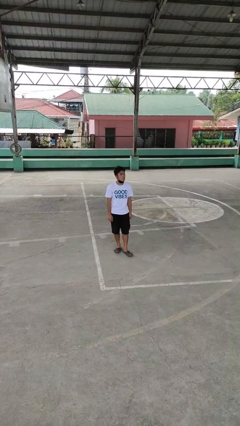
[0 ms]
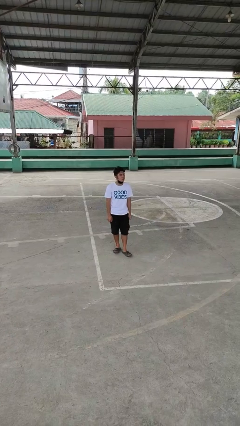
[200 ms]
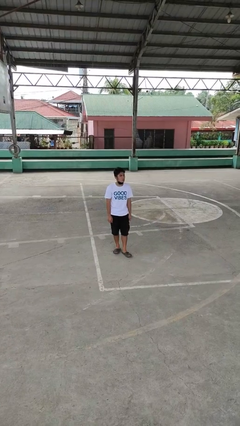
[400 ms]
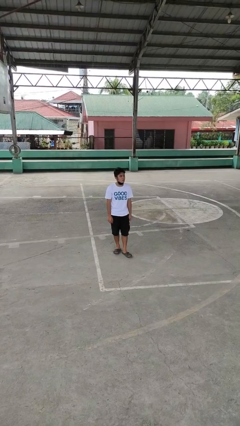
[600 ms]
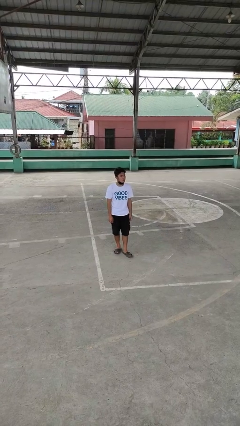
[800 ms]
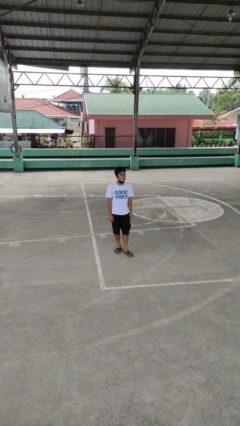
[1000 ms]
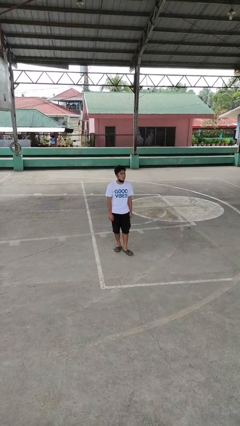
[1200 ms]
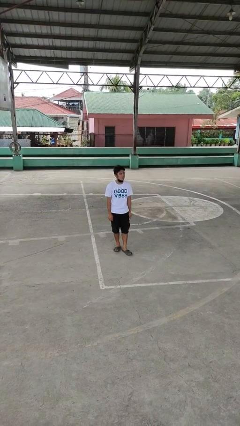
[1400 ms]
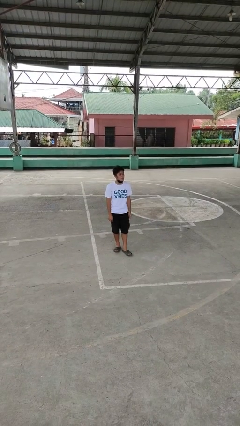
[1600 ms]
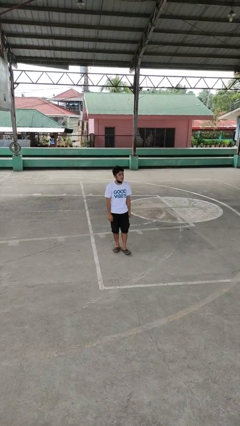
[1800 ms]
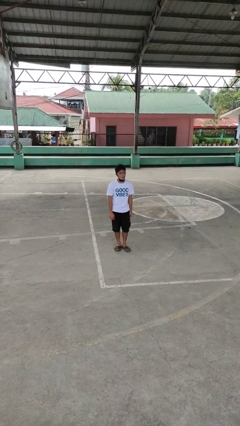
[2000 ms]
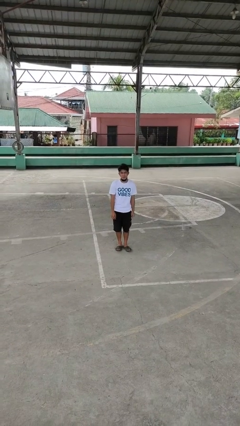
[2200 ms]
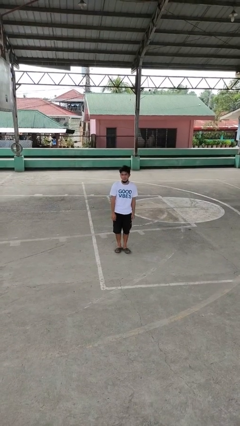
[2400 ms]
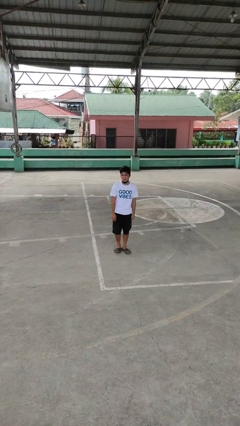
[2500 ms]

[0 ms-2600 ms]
person sticks out tongue

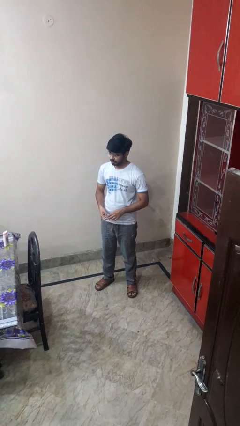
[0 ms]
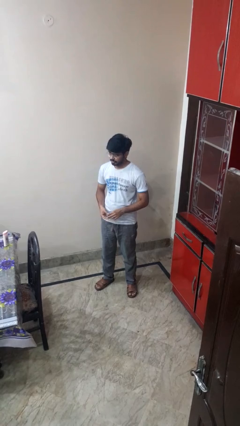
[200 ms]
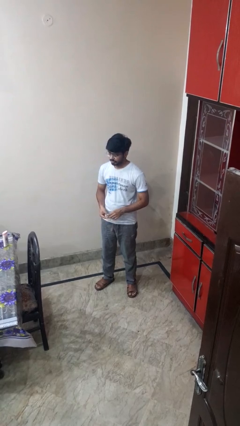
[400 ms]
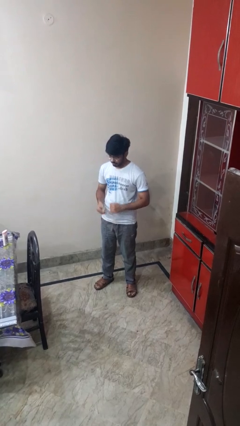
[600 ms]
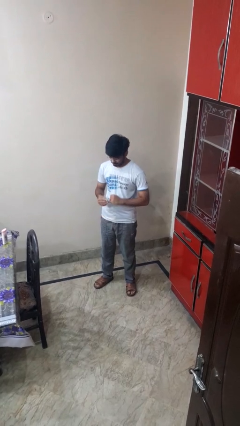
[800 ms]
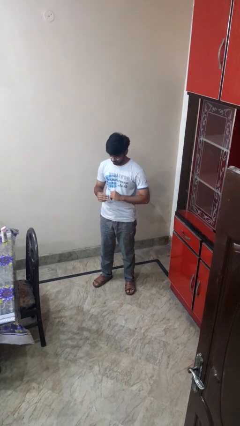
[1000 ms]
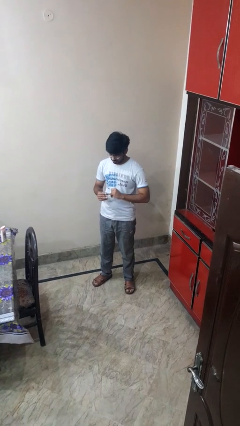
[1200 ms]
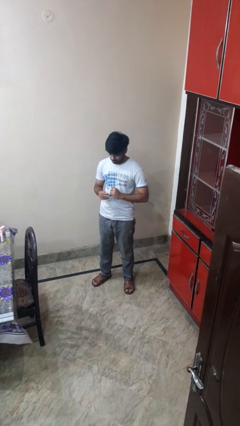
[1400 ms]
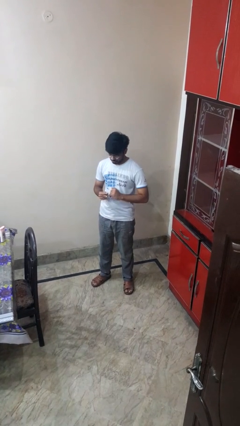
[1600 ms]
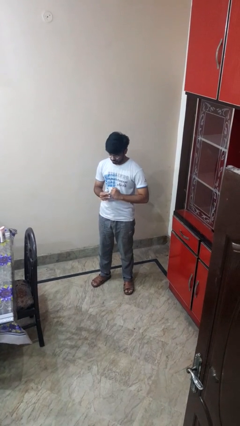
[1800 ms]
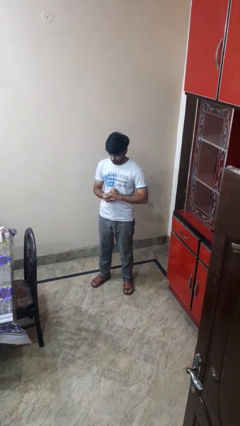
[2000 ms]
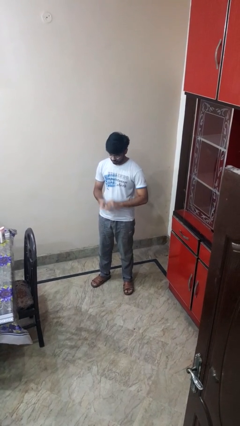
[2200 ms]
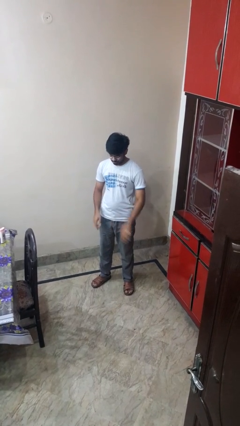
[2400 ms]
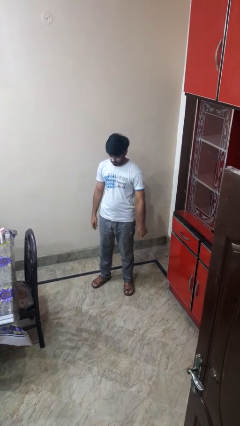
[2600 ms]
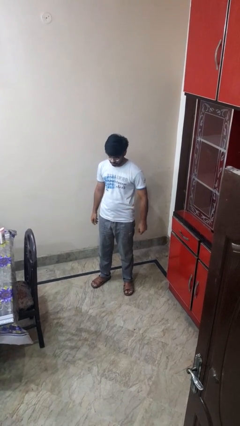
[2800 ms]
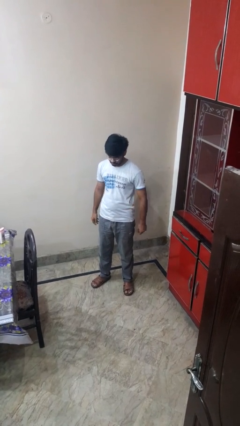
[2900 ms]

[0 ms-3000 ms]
person puts on ring

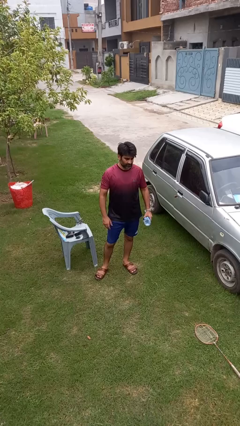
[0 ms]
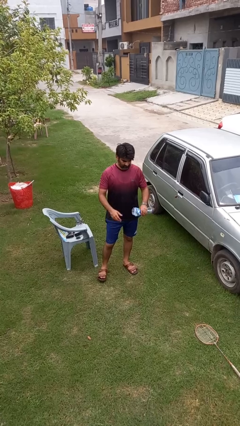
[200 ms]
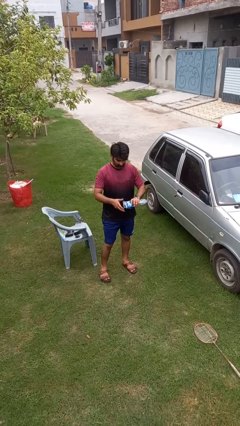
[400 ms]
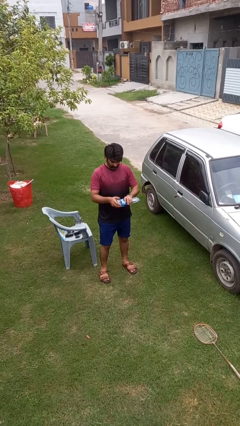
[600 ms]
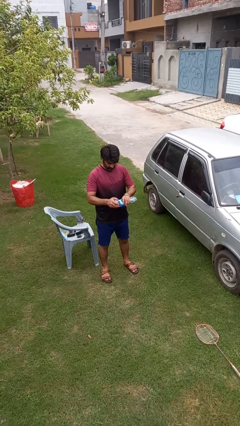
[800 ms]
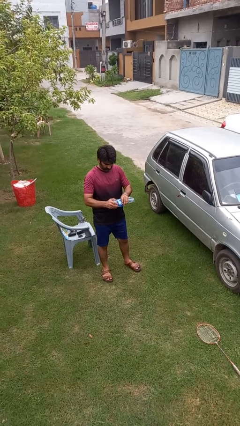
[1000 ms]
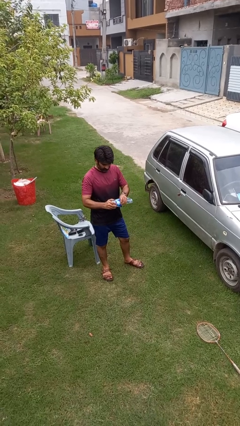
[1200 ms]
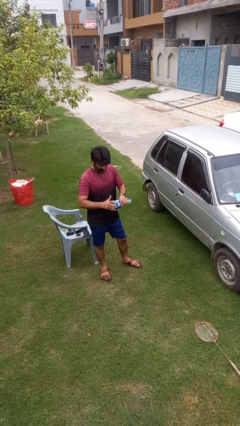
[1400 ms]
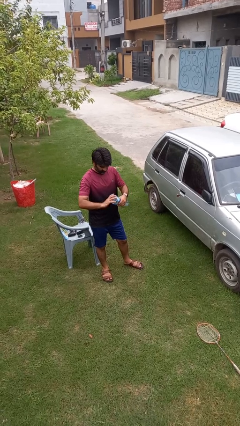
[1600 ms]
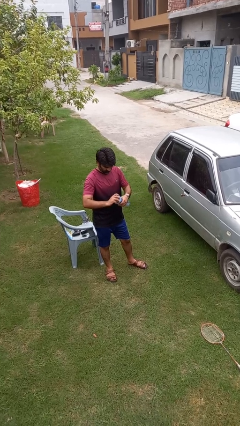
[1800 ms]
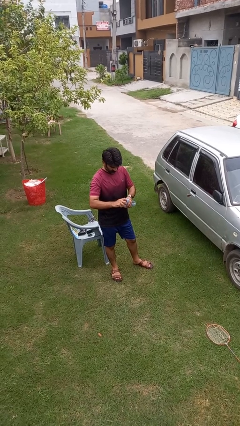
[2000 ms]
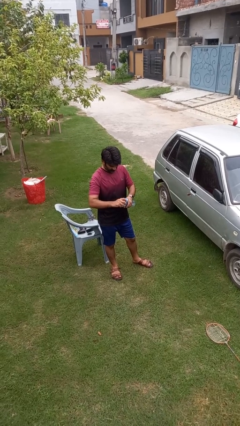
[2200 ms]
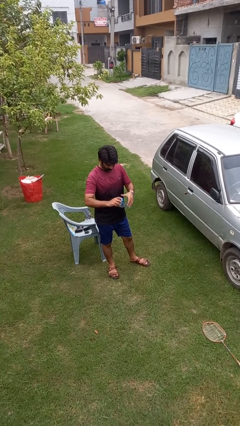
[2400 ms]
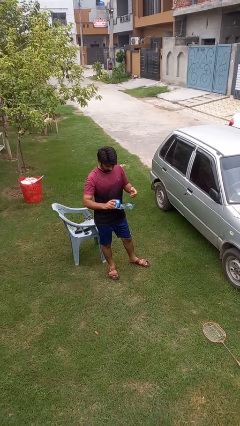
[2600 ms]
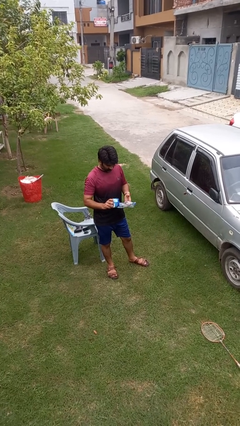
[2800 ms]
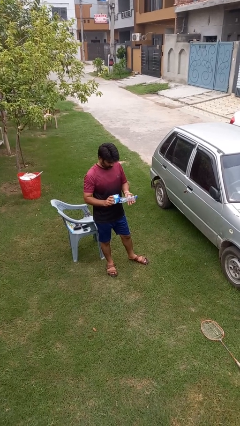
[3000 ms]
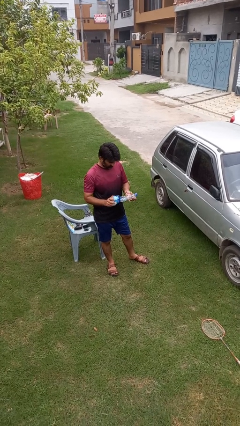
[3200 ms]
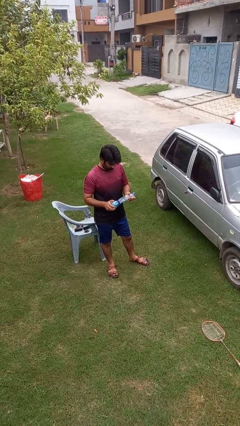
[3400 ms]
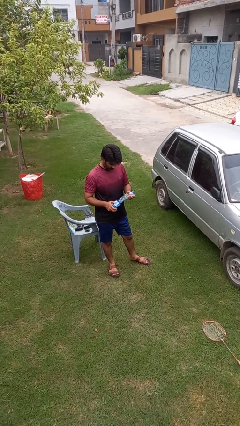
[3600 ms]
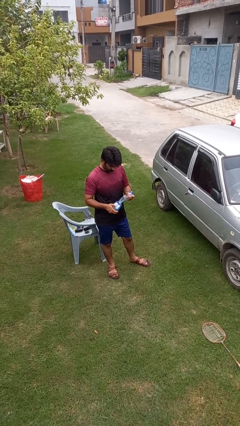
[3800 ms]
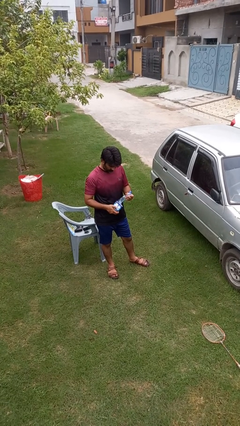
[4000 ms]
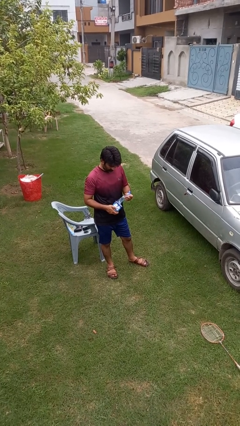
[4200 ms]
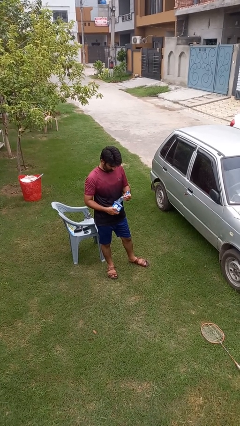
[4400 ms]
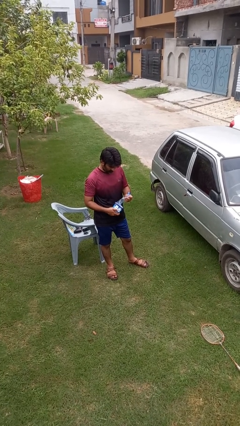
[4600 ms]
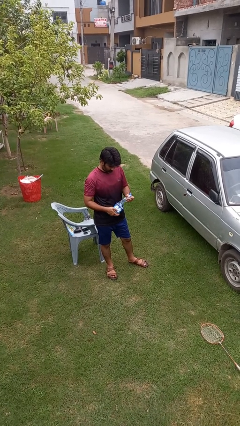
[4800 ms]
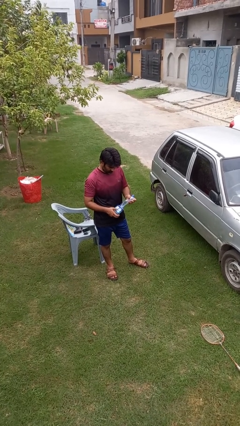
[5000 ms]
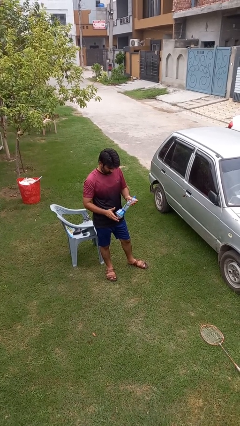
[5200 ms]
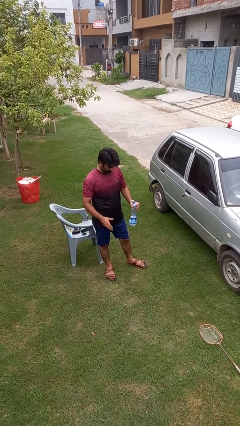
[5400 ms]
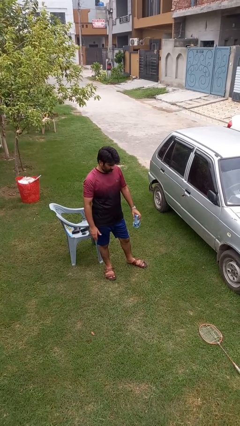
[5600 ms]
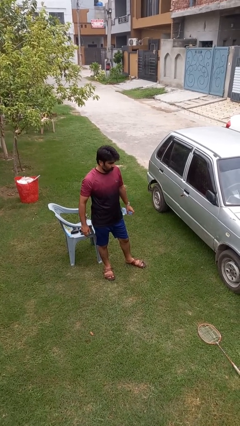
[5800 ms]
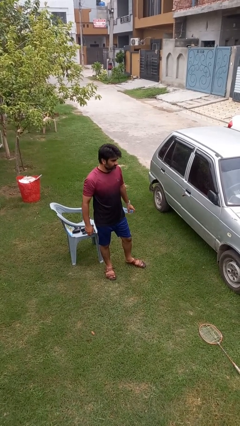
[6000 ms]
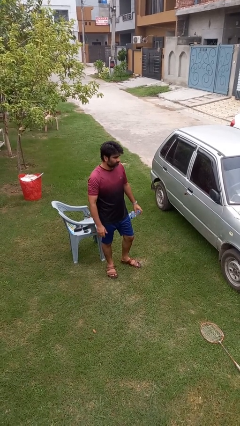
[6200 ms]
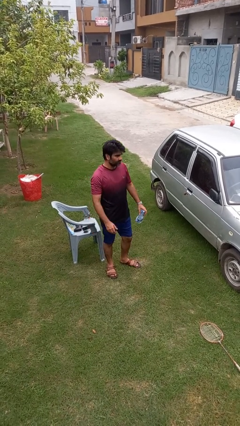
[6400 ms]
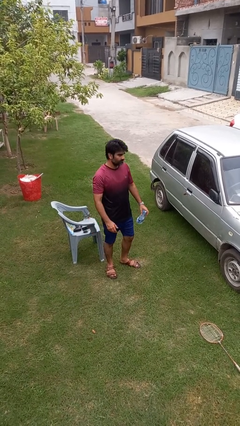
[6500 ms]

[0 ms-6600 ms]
person squeezes object

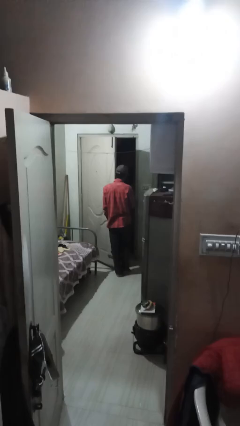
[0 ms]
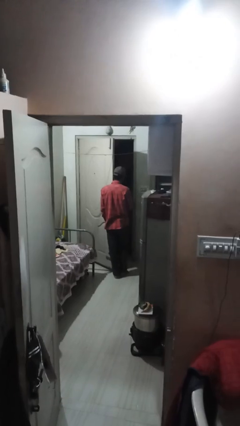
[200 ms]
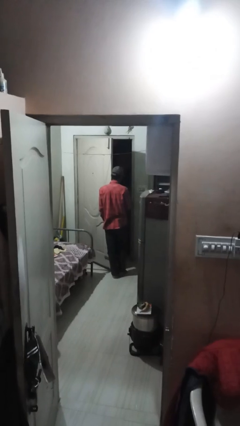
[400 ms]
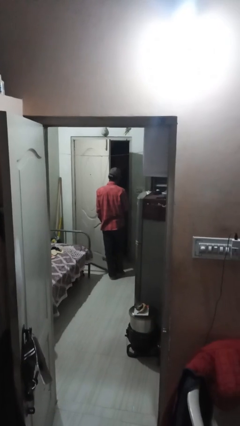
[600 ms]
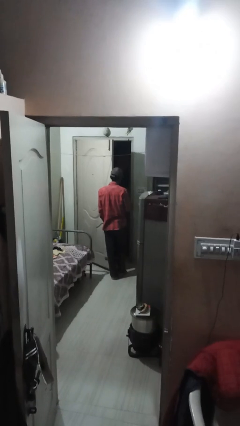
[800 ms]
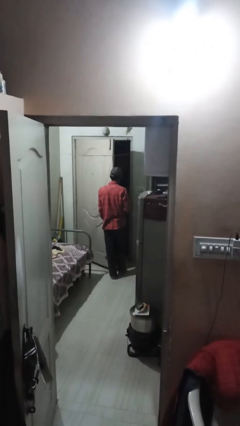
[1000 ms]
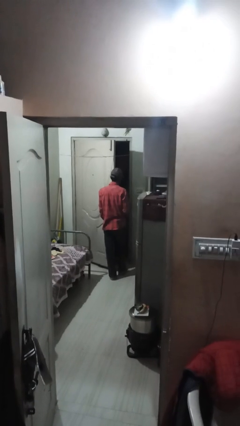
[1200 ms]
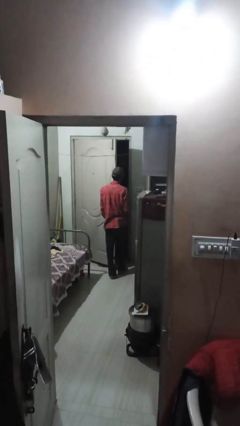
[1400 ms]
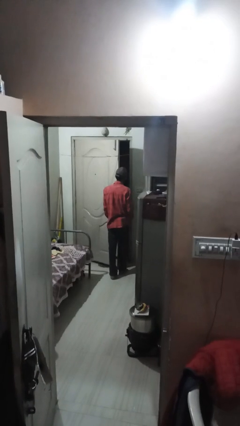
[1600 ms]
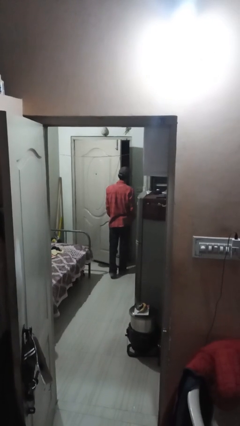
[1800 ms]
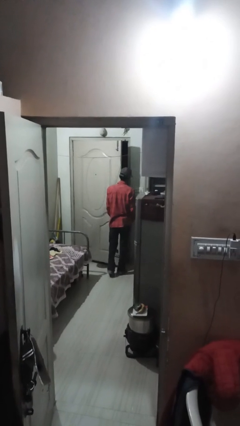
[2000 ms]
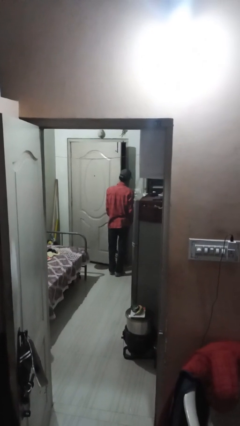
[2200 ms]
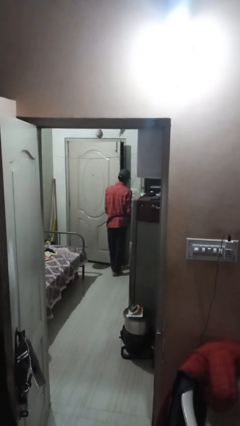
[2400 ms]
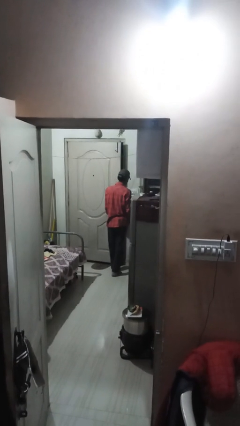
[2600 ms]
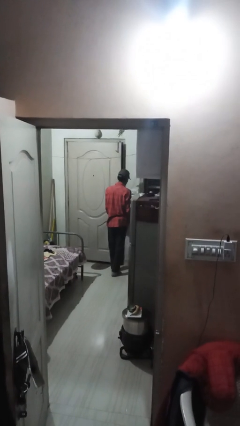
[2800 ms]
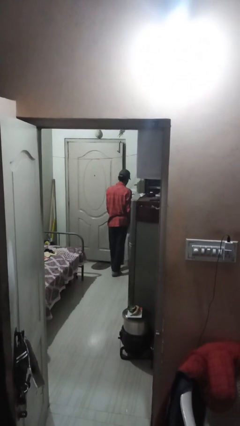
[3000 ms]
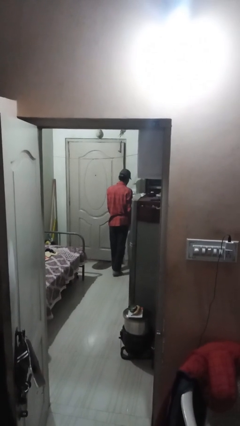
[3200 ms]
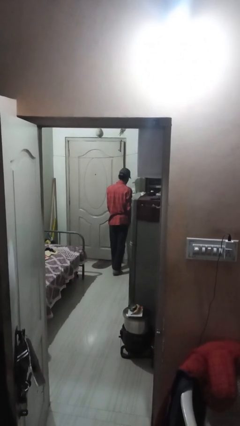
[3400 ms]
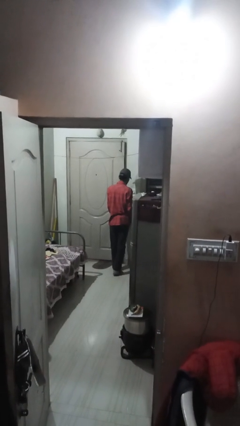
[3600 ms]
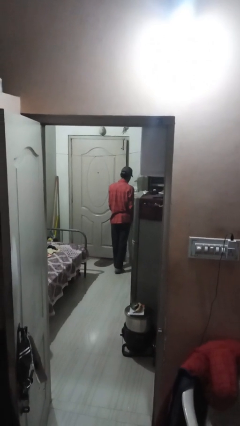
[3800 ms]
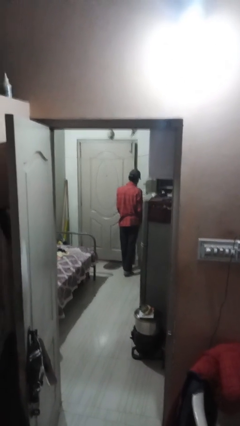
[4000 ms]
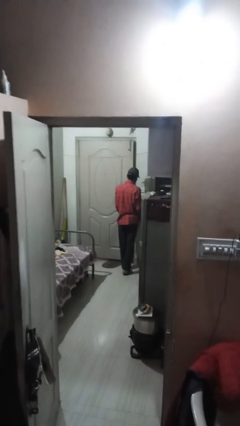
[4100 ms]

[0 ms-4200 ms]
person closes facility door

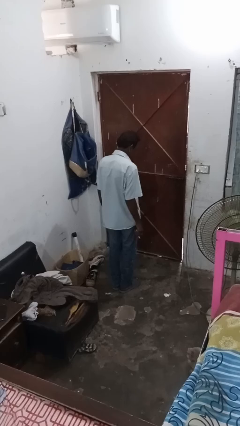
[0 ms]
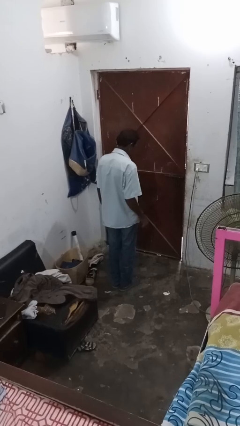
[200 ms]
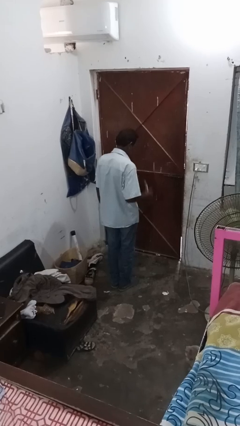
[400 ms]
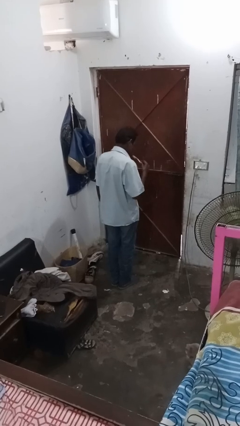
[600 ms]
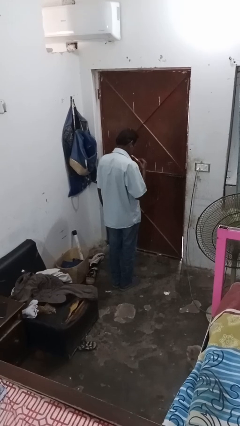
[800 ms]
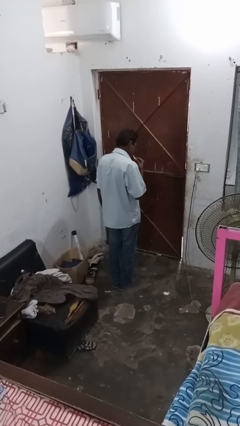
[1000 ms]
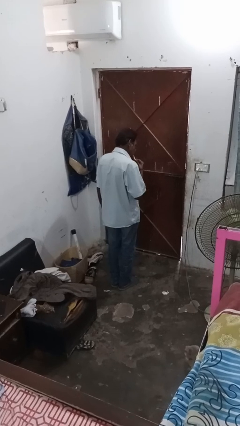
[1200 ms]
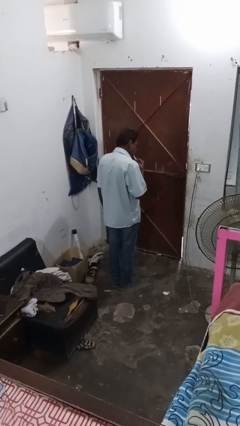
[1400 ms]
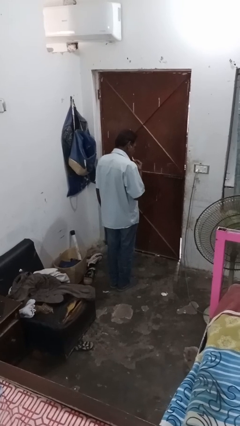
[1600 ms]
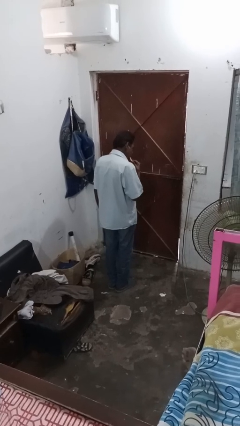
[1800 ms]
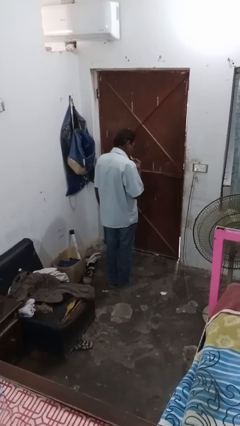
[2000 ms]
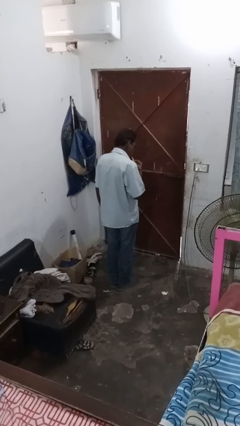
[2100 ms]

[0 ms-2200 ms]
person brushes teeth
